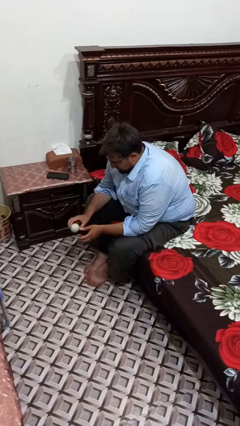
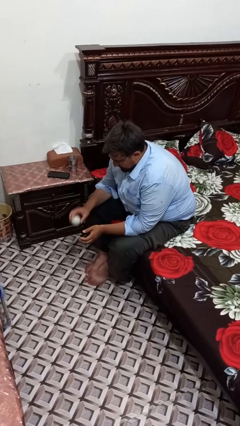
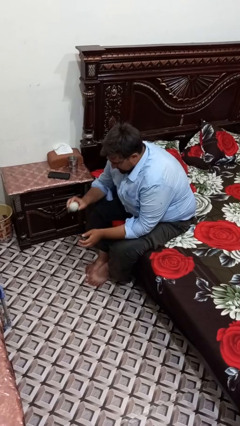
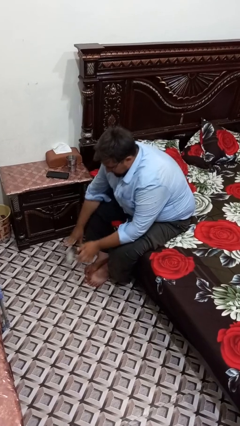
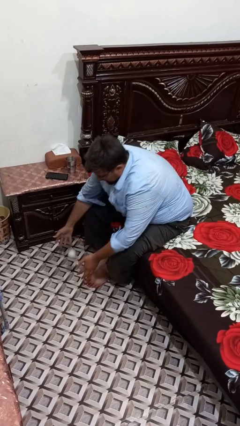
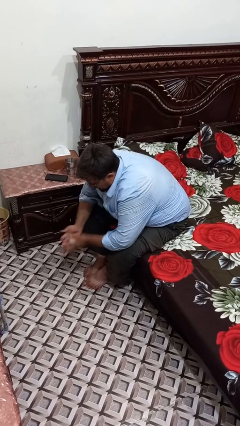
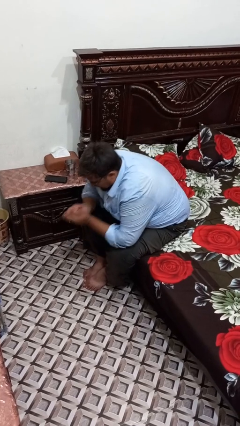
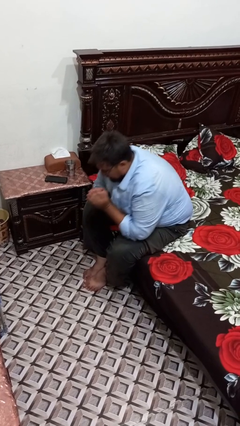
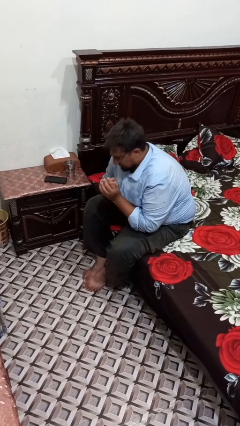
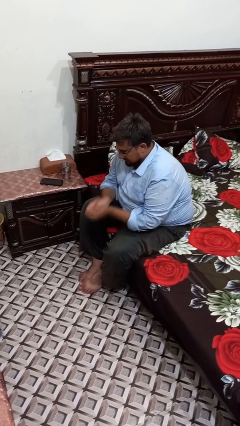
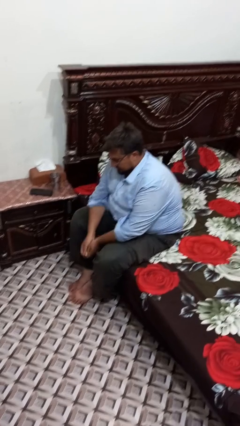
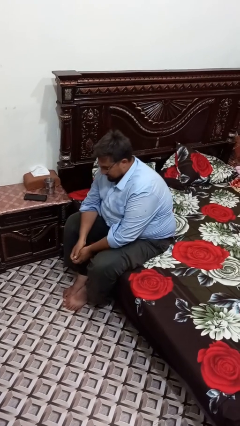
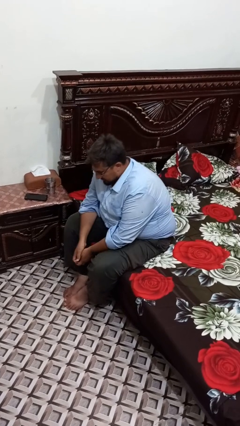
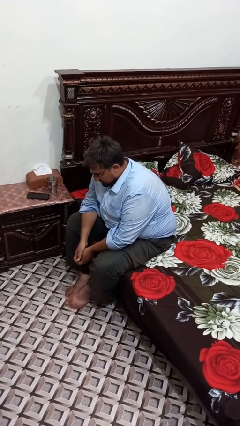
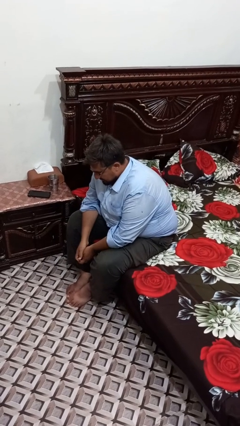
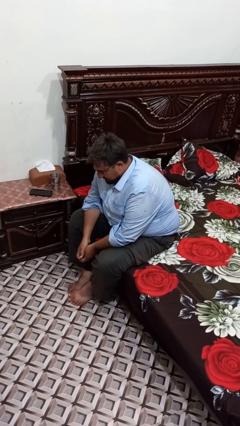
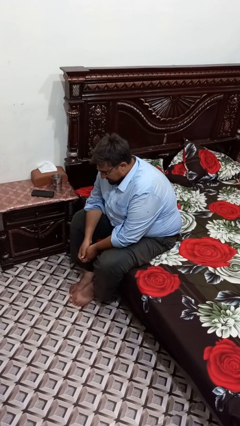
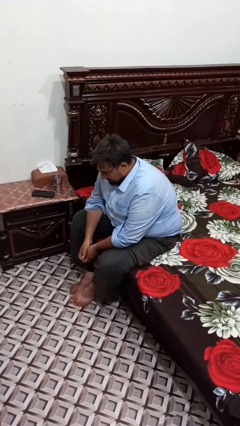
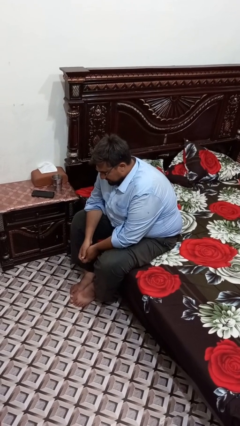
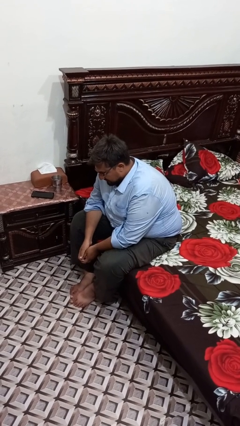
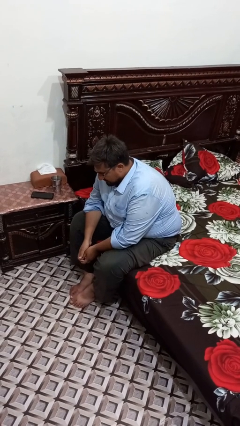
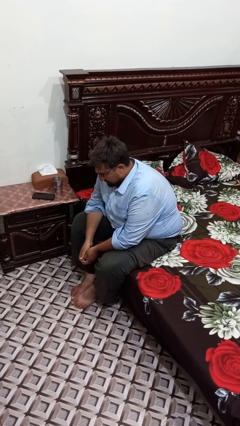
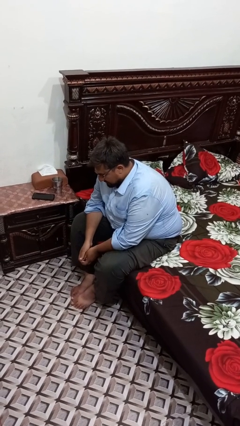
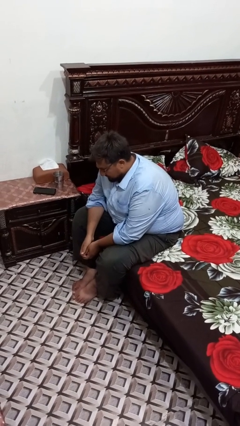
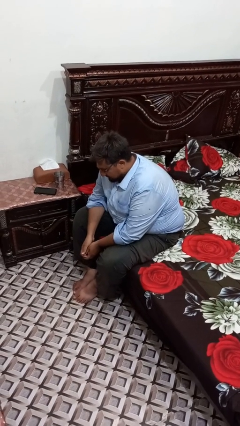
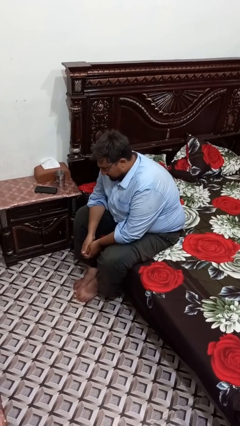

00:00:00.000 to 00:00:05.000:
person bounces ball on floor

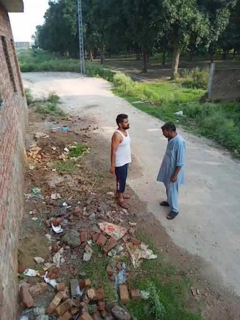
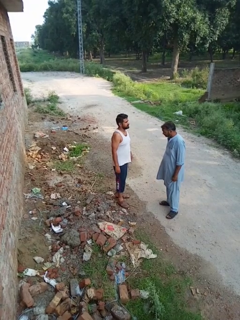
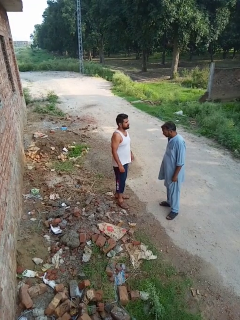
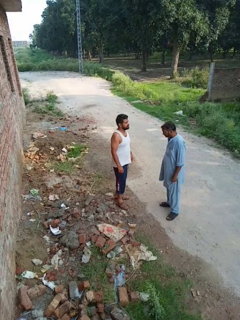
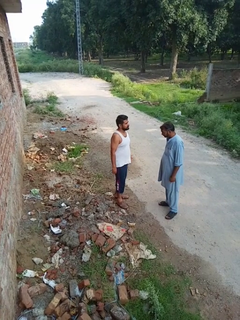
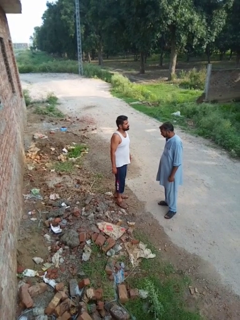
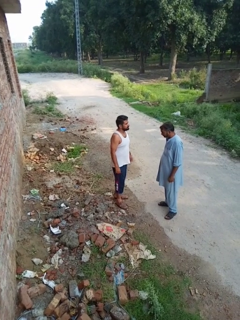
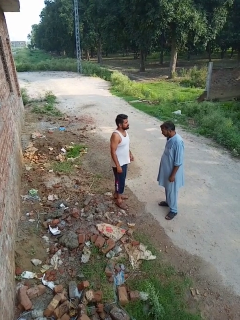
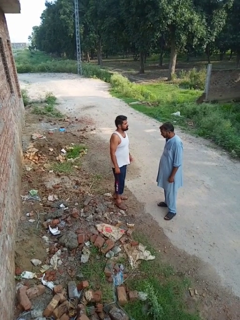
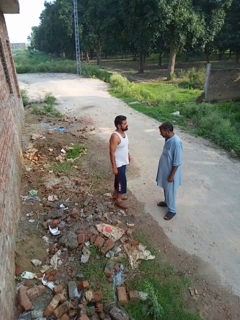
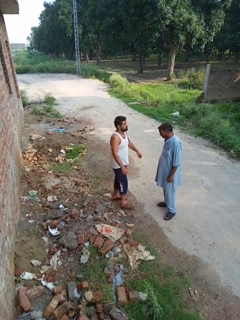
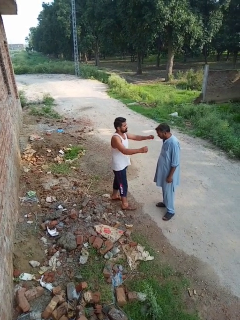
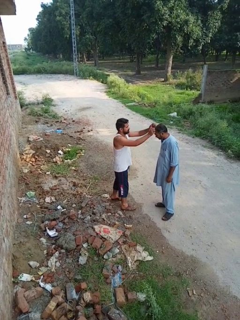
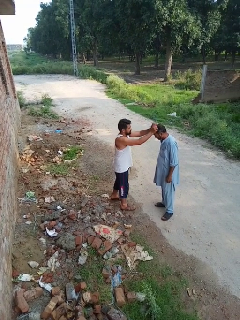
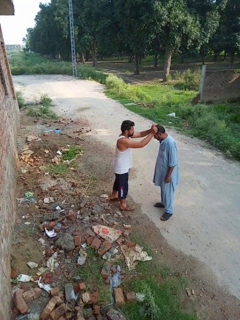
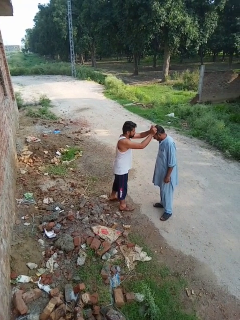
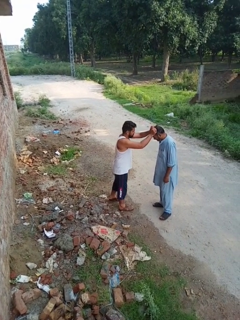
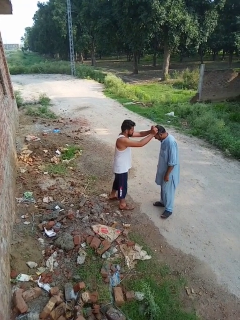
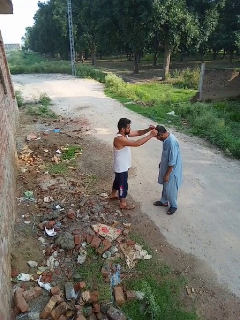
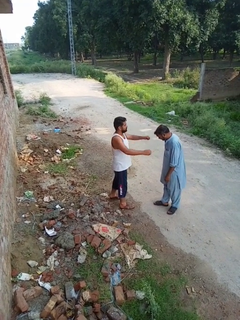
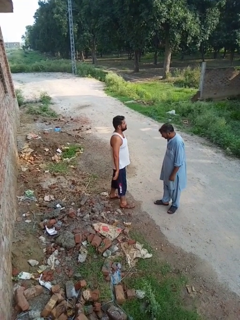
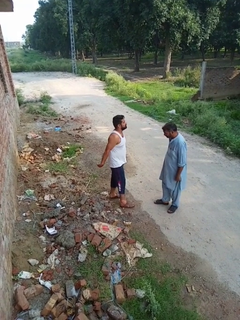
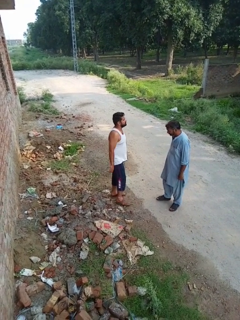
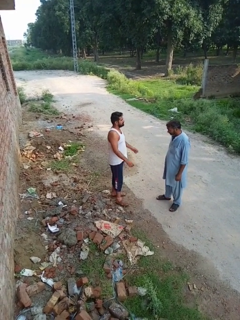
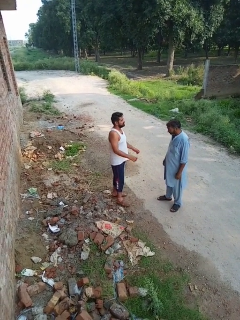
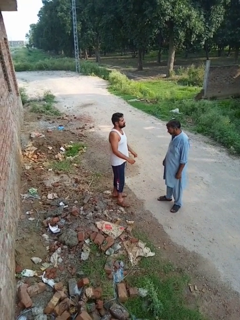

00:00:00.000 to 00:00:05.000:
person grabs person by hair

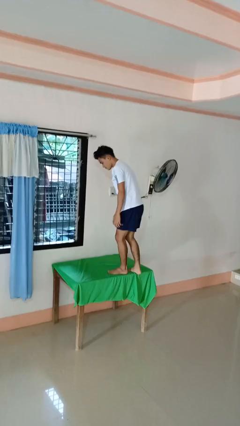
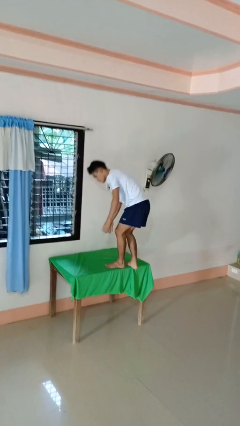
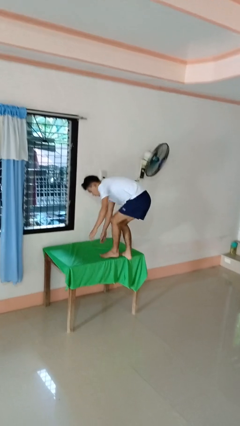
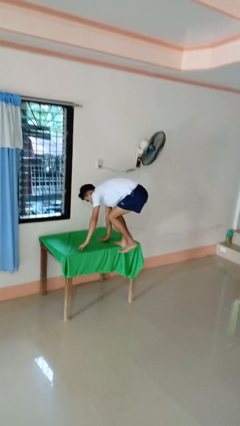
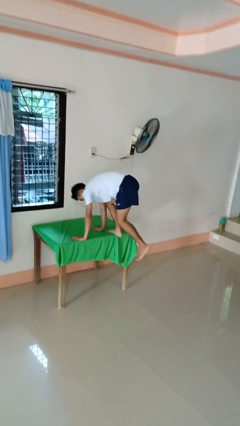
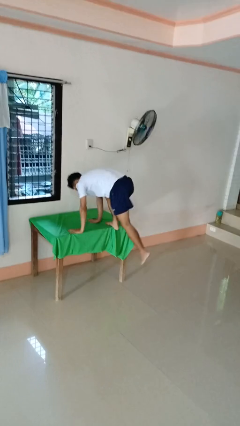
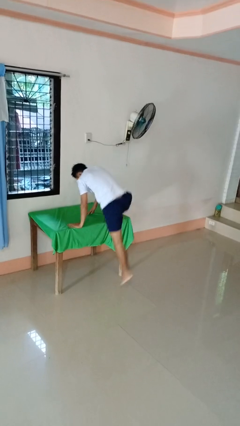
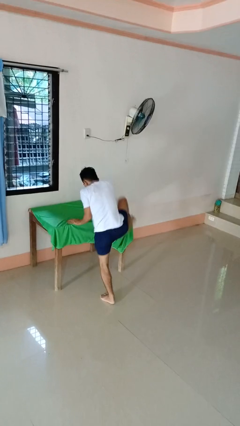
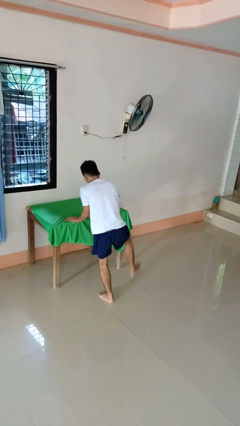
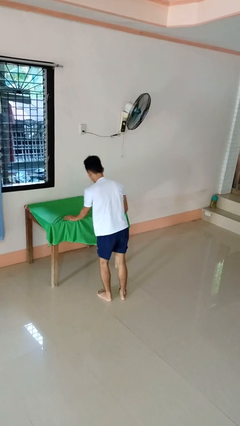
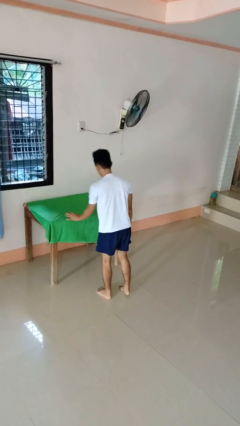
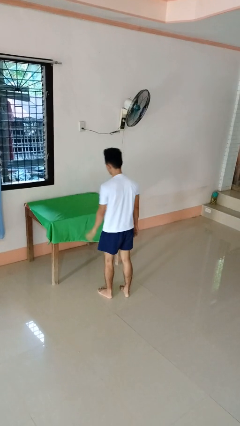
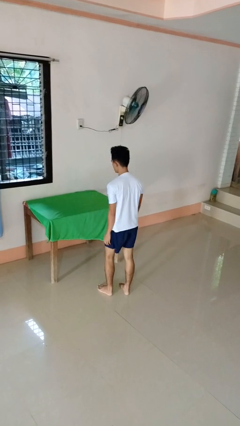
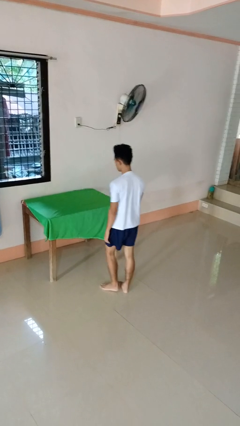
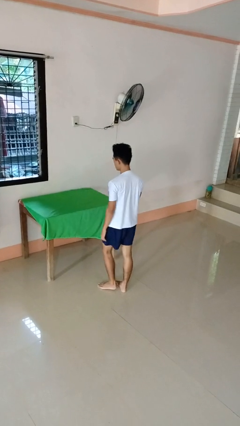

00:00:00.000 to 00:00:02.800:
person climbs off table

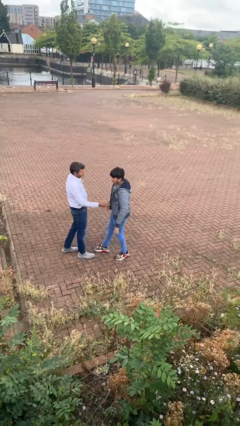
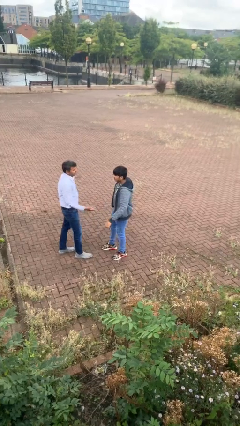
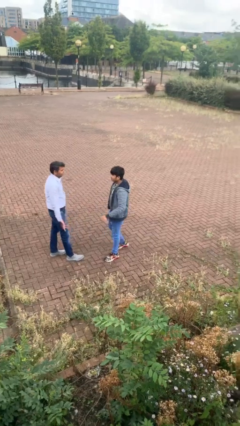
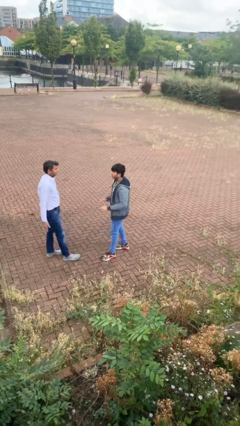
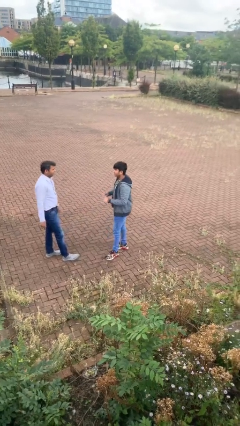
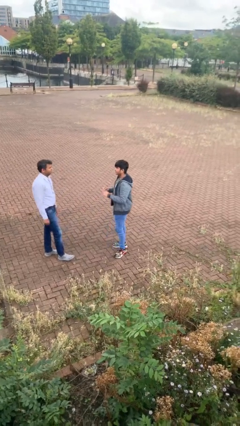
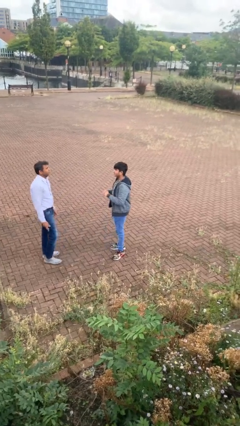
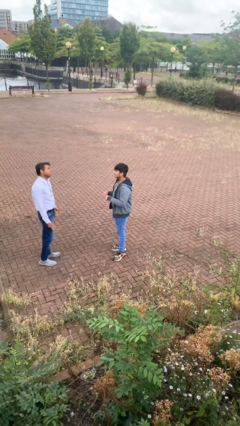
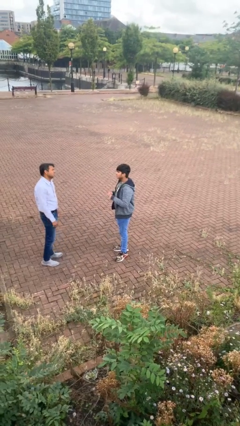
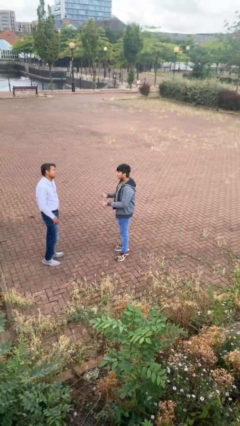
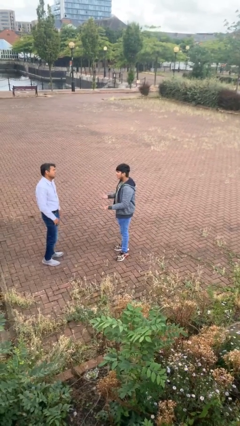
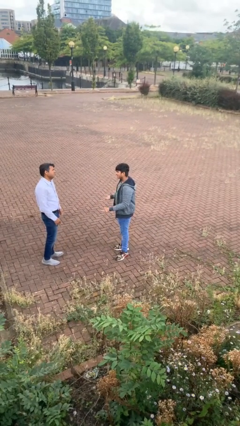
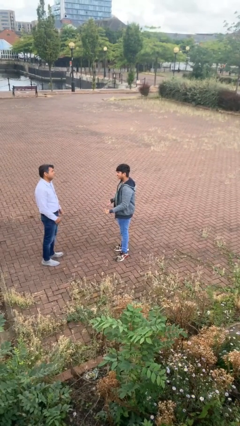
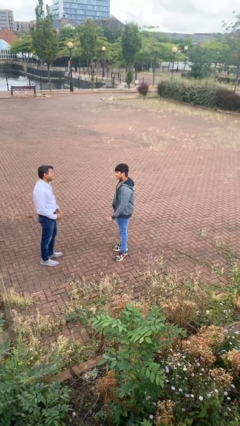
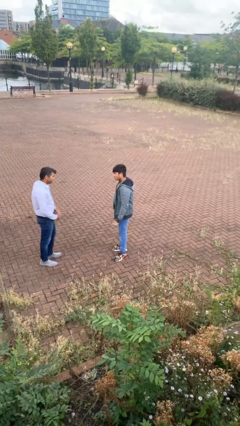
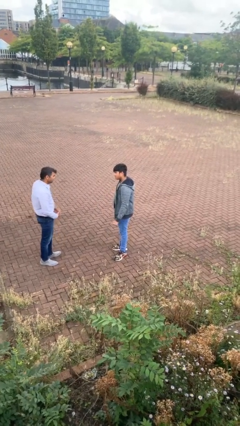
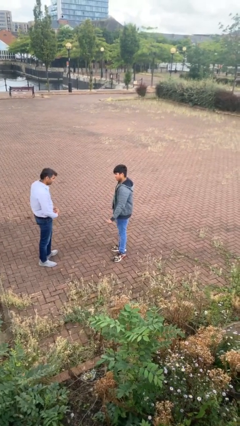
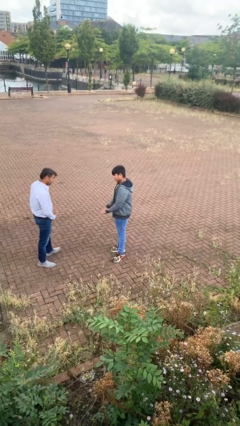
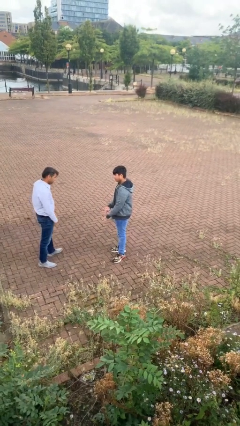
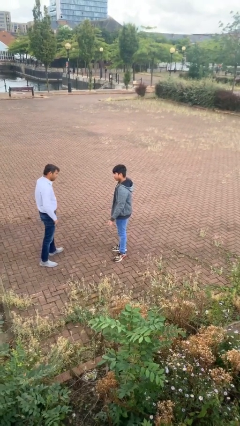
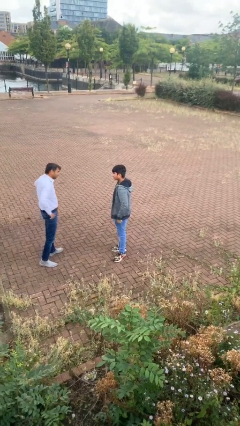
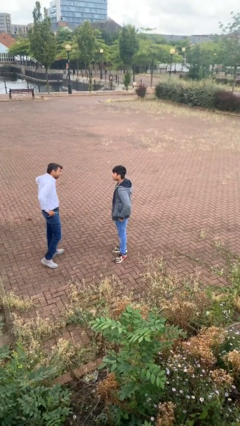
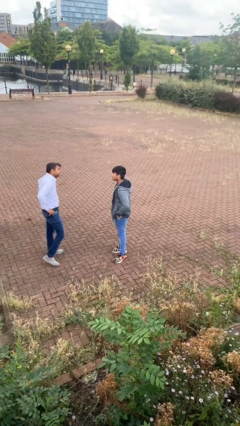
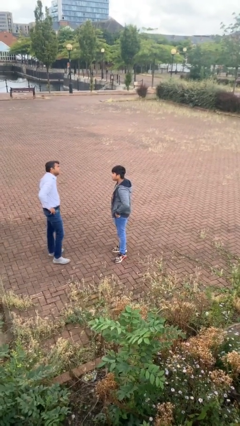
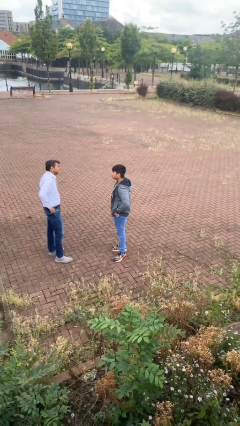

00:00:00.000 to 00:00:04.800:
person talks to person

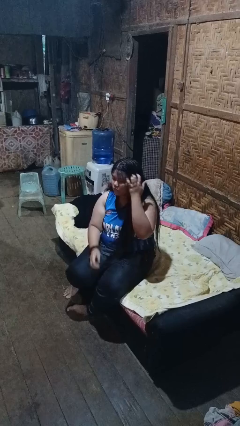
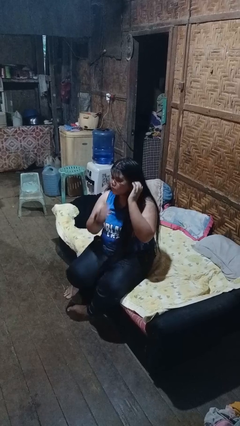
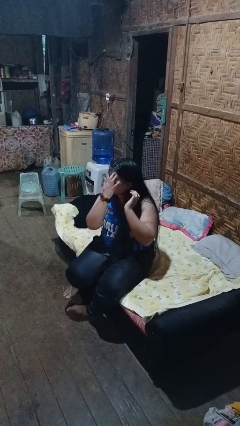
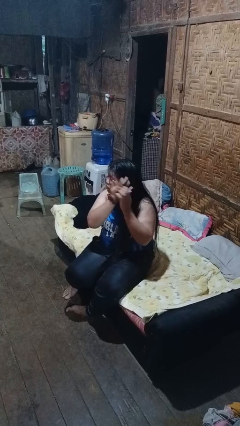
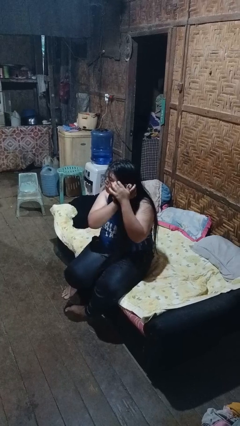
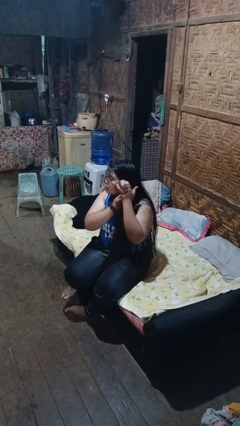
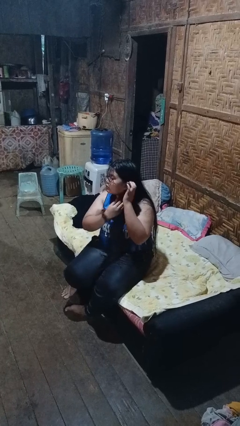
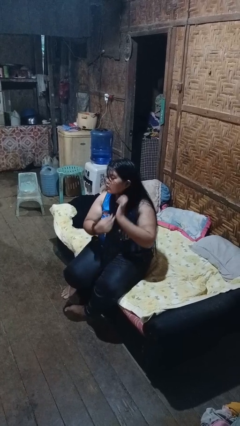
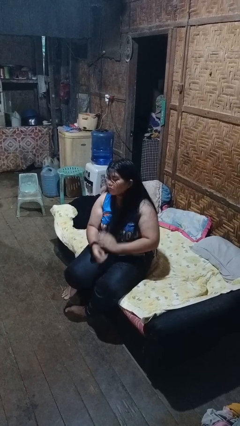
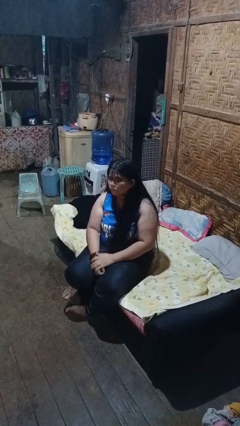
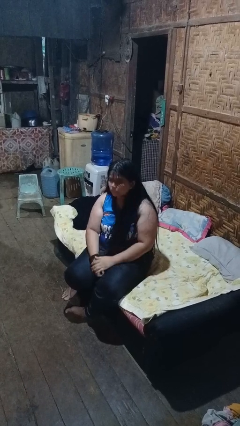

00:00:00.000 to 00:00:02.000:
person strokes hair
